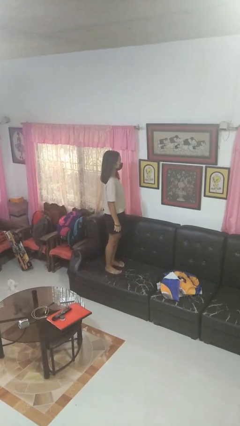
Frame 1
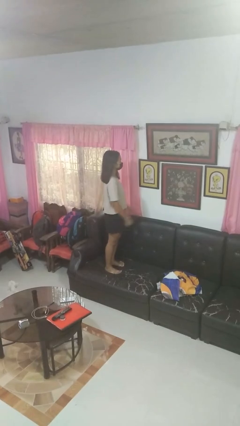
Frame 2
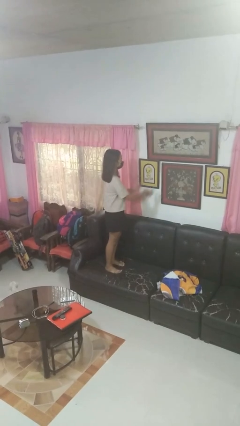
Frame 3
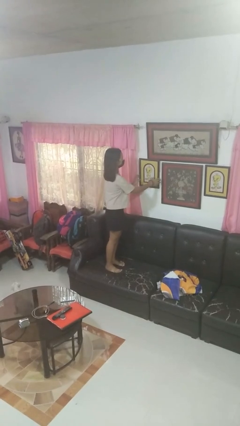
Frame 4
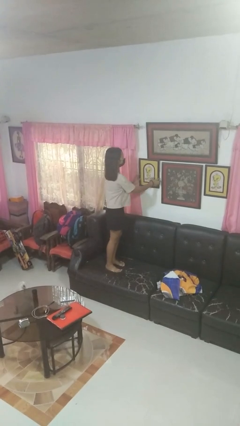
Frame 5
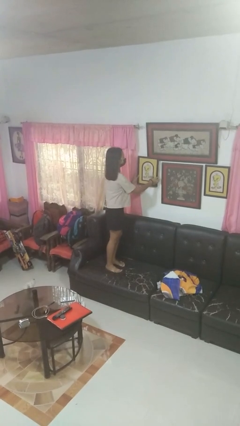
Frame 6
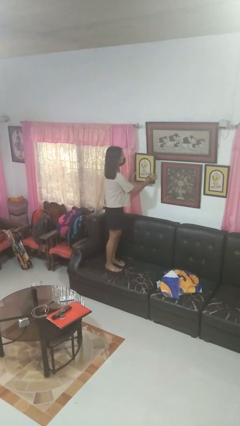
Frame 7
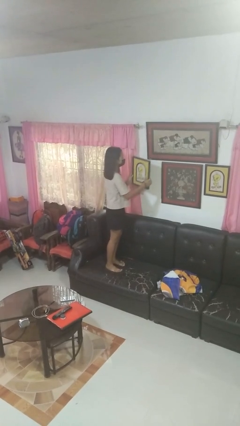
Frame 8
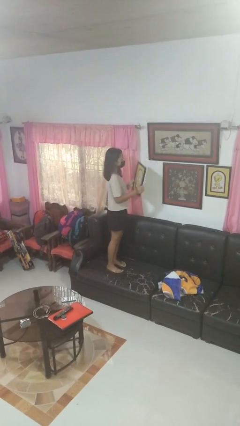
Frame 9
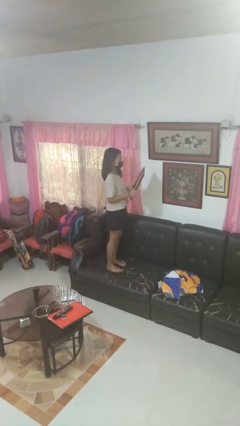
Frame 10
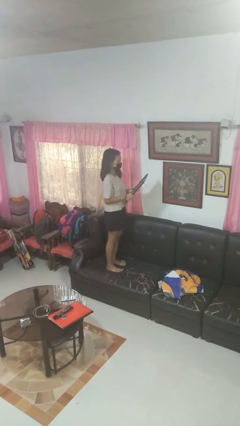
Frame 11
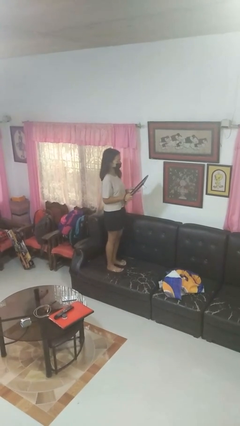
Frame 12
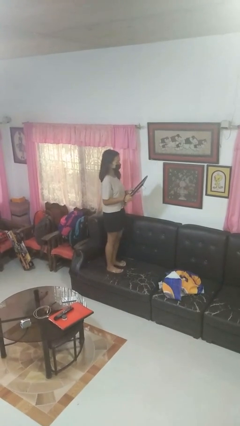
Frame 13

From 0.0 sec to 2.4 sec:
person takes down picture frame

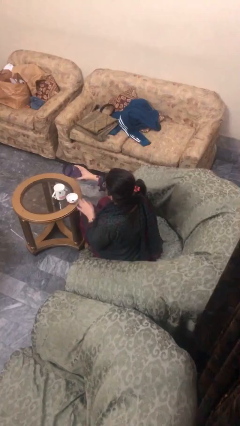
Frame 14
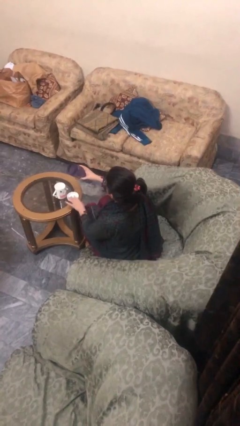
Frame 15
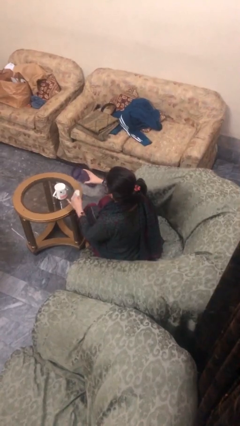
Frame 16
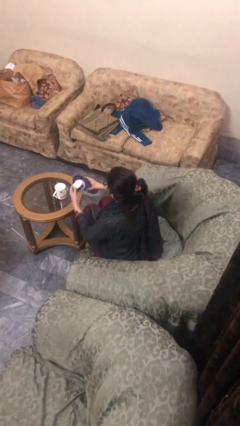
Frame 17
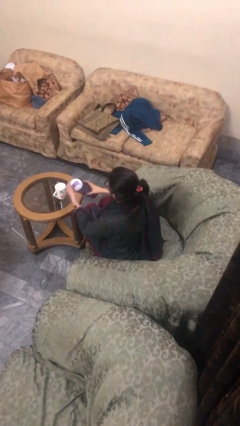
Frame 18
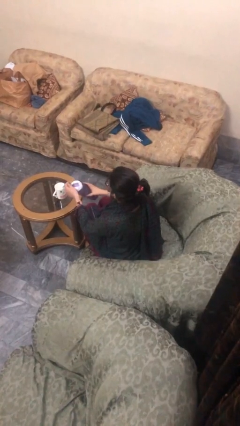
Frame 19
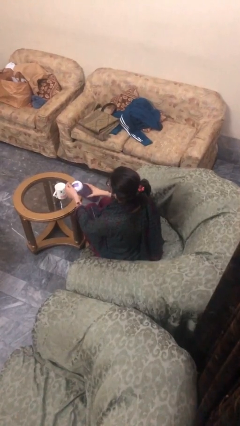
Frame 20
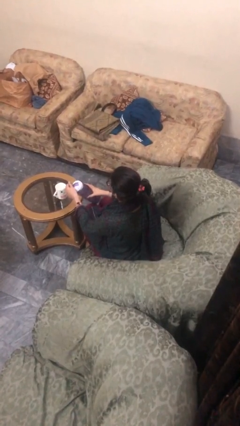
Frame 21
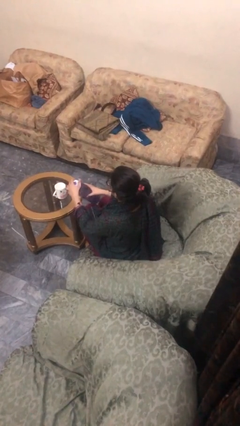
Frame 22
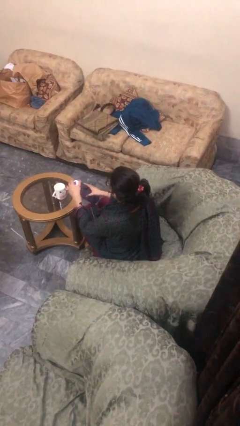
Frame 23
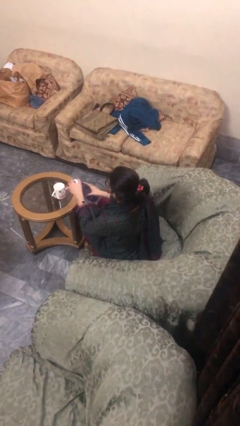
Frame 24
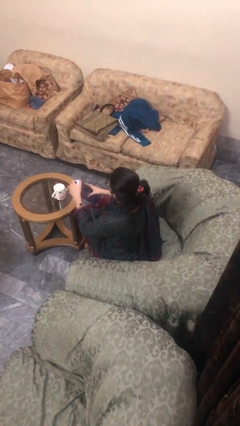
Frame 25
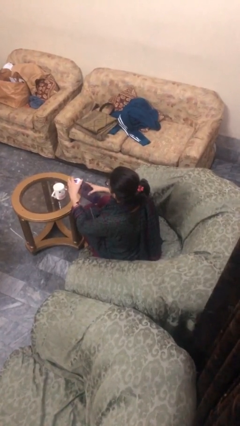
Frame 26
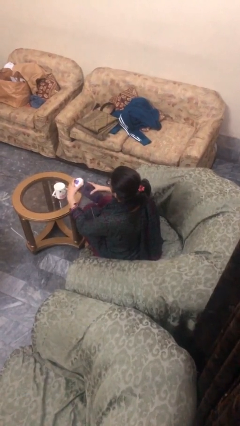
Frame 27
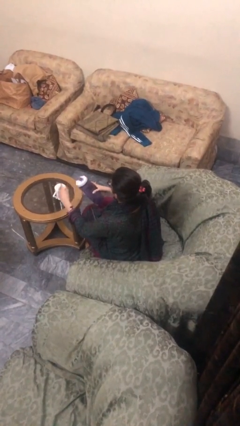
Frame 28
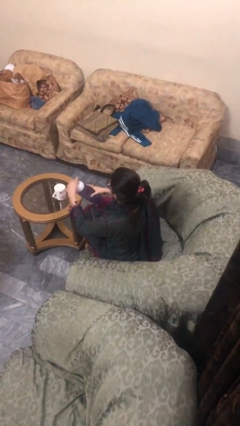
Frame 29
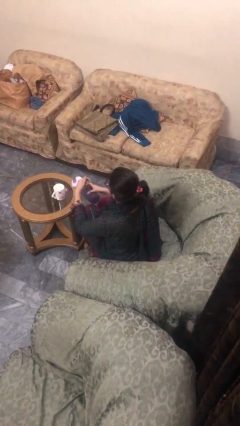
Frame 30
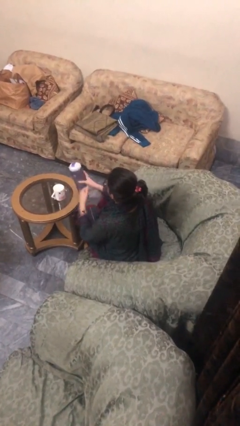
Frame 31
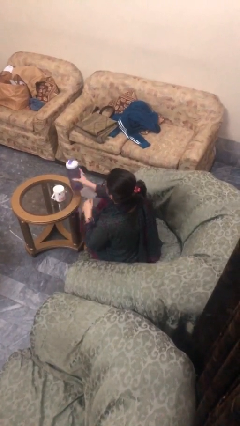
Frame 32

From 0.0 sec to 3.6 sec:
person screws lid to bottle

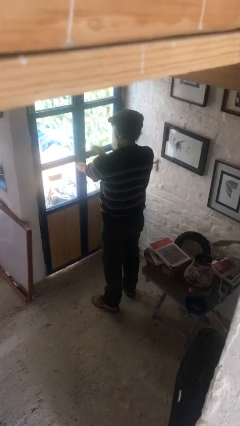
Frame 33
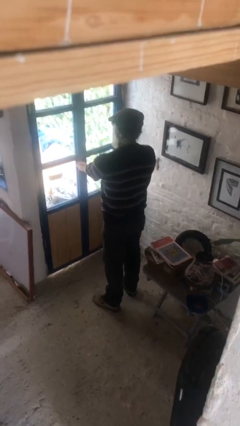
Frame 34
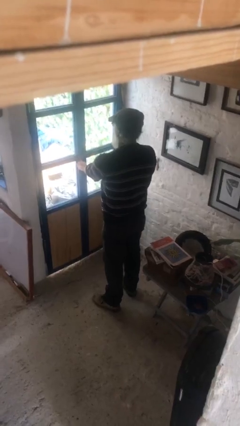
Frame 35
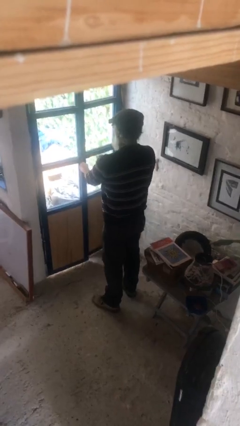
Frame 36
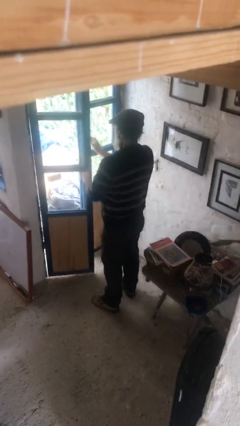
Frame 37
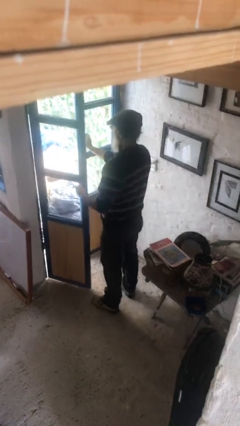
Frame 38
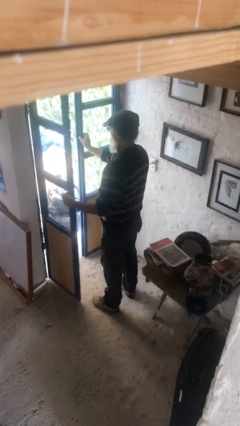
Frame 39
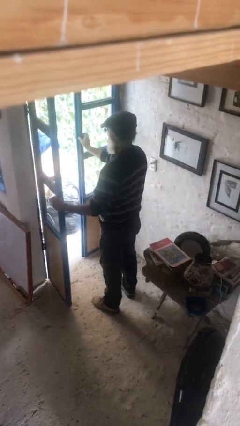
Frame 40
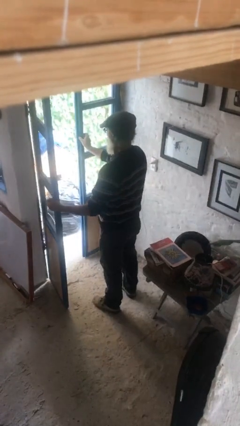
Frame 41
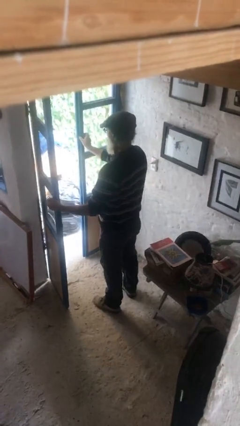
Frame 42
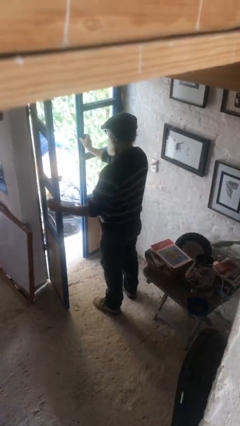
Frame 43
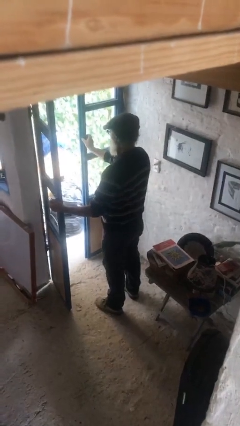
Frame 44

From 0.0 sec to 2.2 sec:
person opens facility door

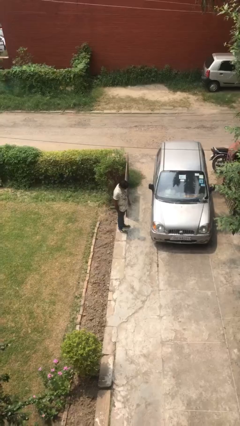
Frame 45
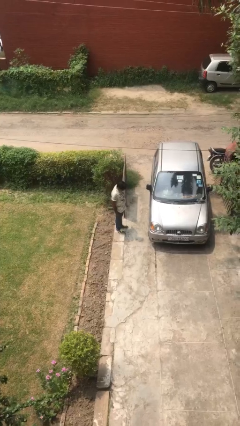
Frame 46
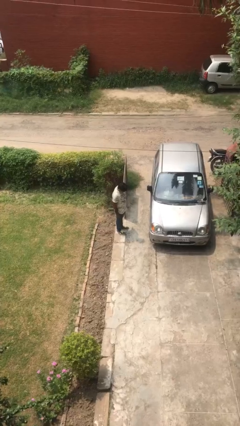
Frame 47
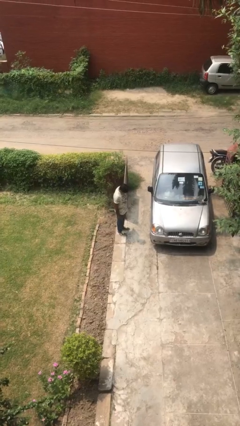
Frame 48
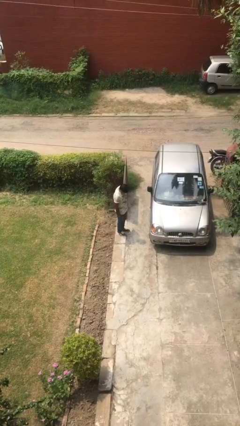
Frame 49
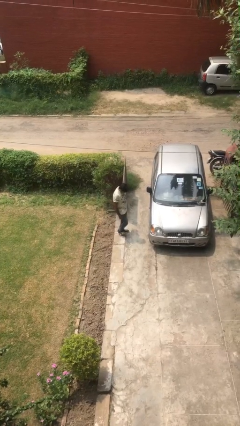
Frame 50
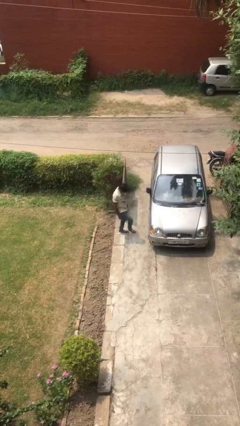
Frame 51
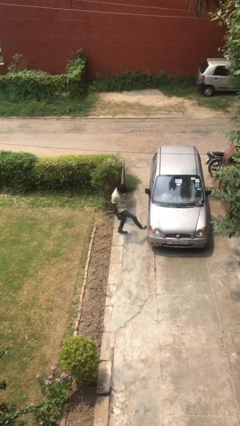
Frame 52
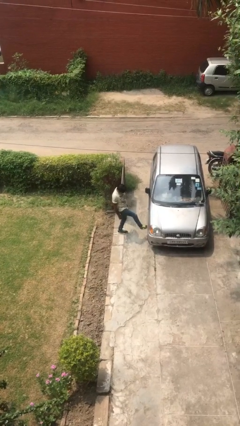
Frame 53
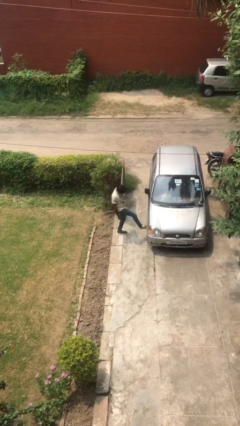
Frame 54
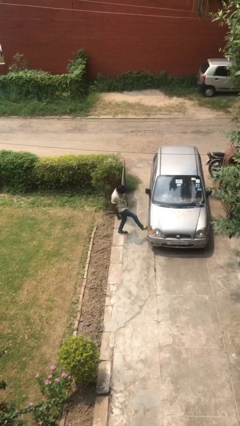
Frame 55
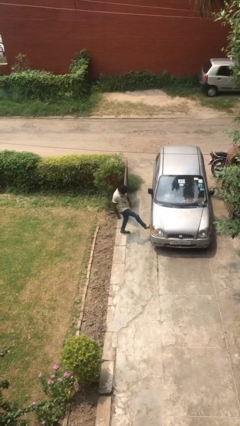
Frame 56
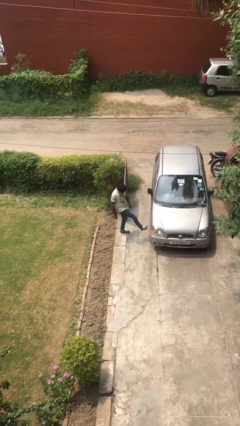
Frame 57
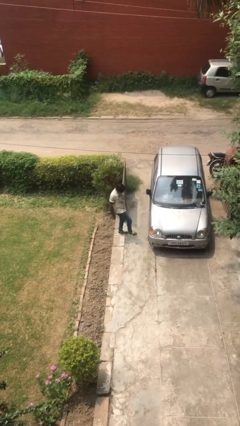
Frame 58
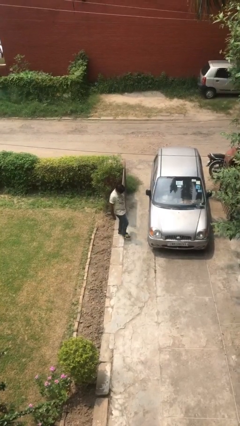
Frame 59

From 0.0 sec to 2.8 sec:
person kicks car tires

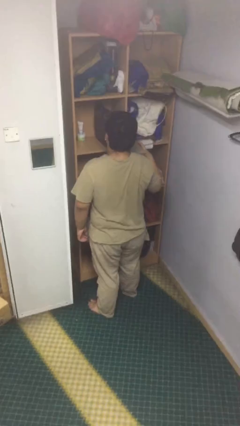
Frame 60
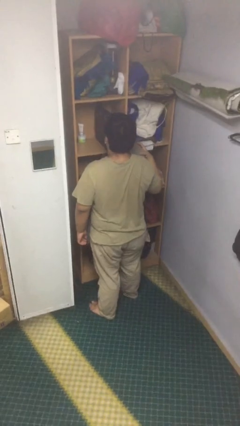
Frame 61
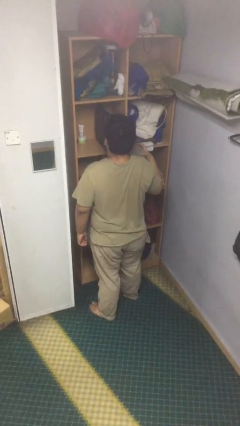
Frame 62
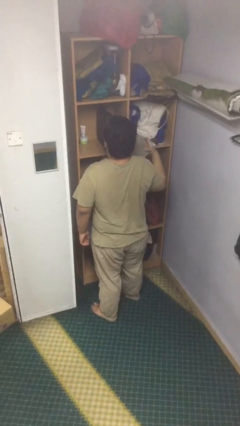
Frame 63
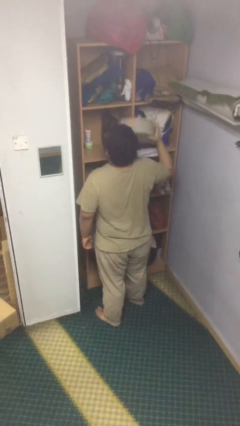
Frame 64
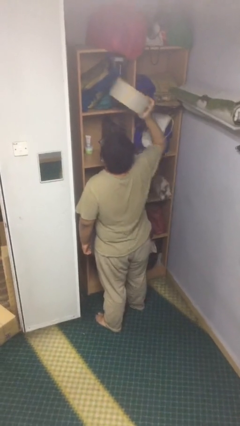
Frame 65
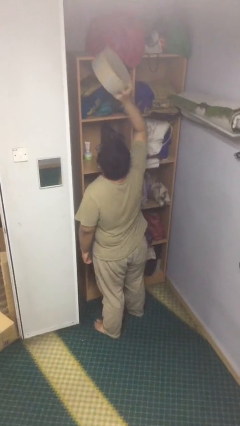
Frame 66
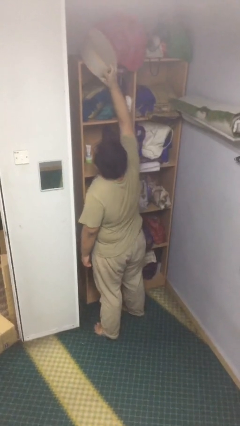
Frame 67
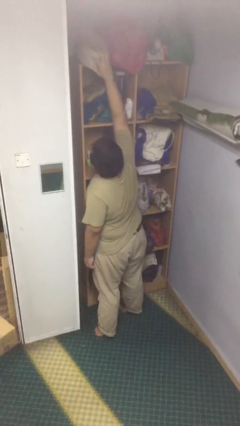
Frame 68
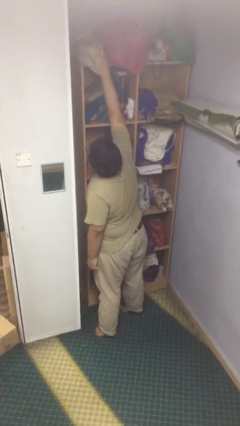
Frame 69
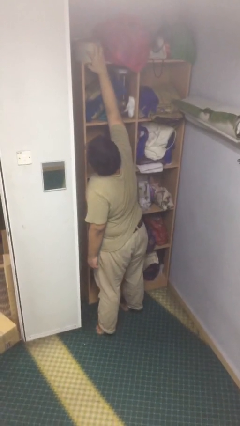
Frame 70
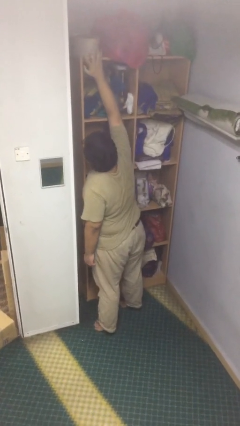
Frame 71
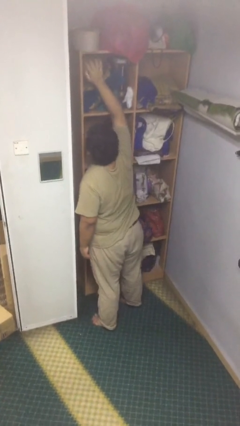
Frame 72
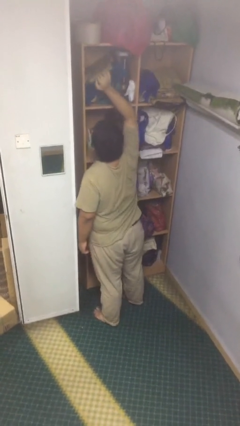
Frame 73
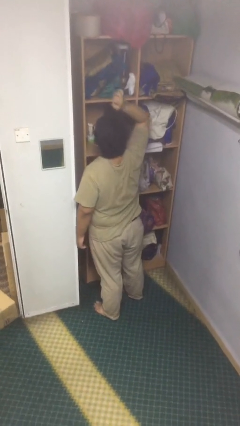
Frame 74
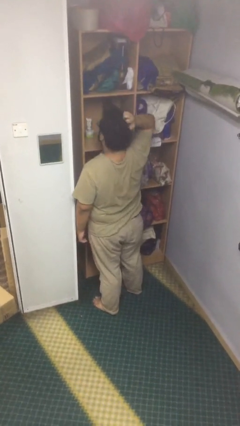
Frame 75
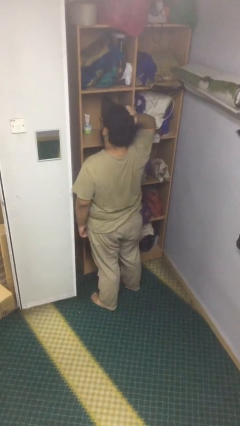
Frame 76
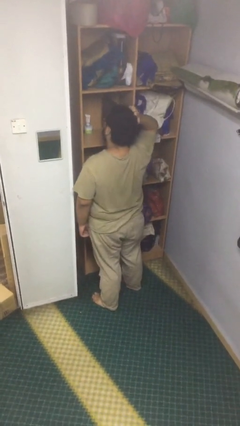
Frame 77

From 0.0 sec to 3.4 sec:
person puts down object on shelf

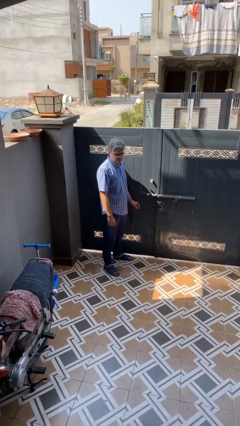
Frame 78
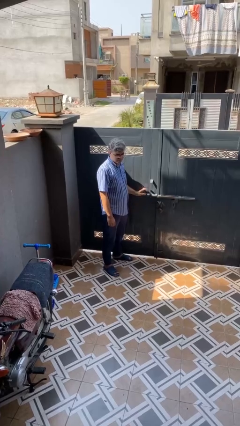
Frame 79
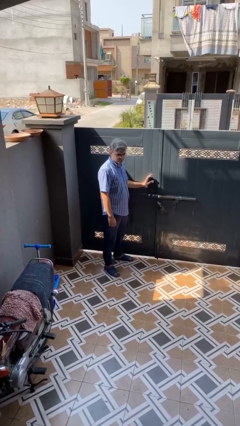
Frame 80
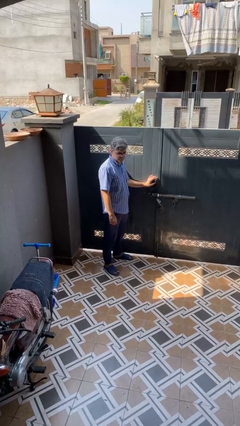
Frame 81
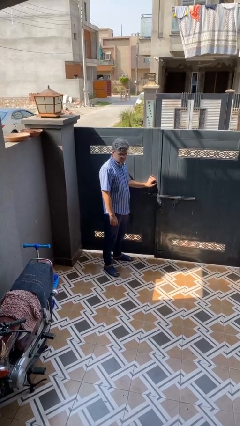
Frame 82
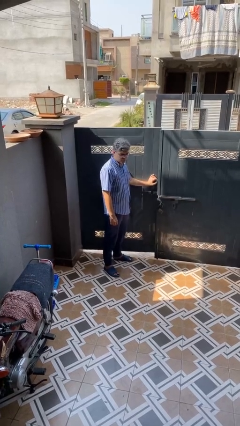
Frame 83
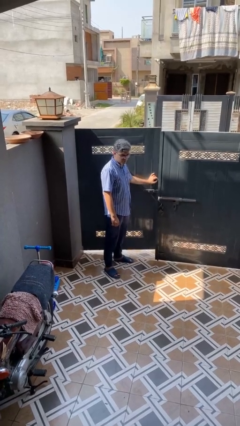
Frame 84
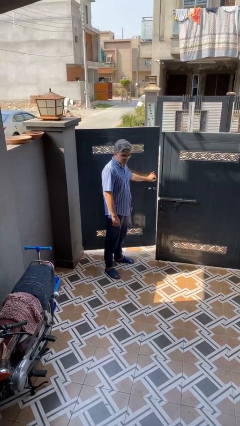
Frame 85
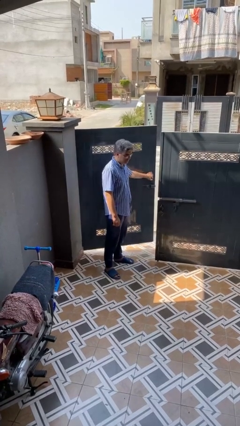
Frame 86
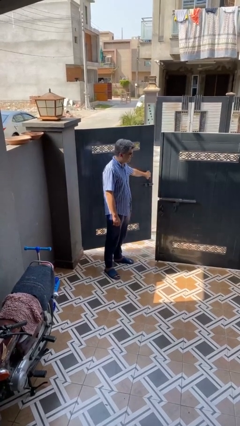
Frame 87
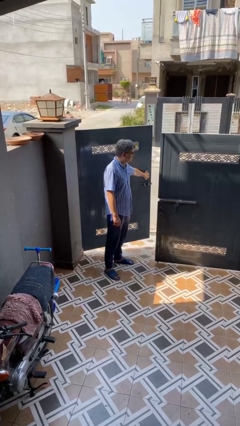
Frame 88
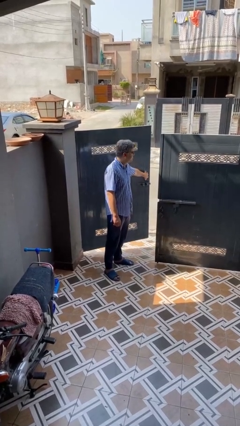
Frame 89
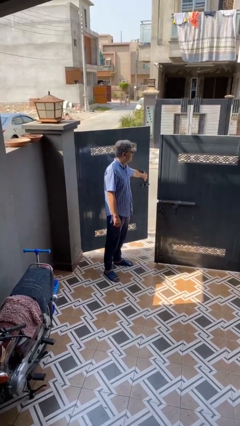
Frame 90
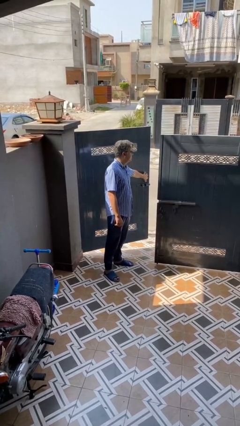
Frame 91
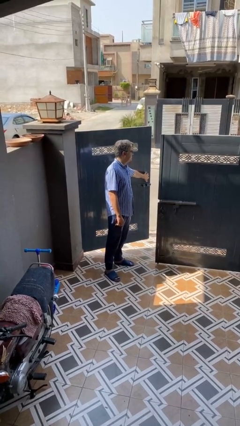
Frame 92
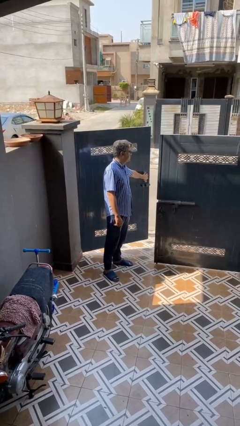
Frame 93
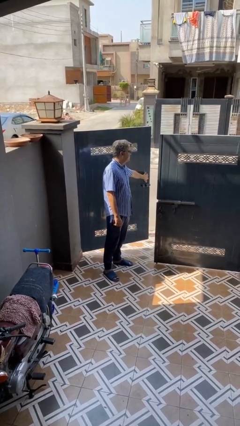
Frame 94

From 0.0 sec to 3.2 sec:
person opens gate
